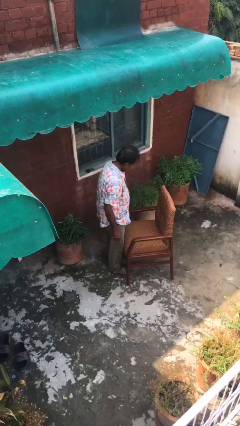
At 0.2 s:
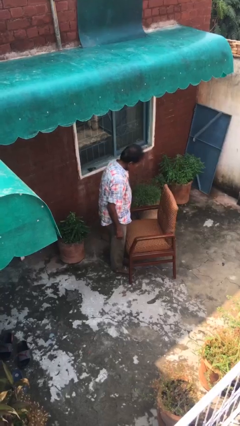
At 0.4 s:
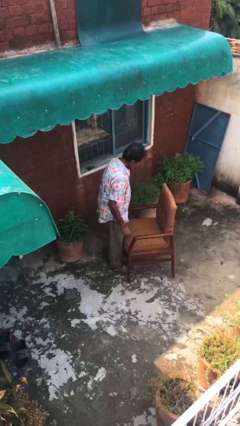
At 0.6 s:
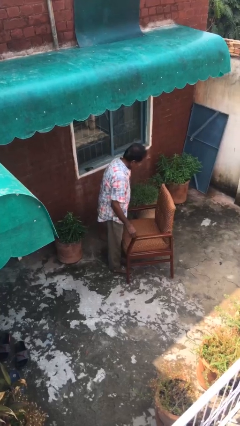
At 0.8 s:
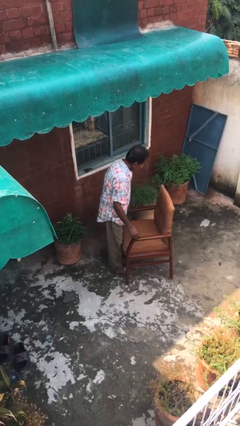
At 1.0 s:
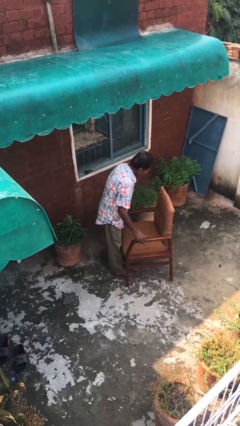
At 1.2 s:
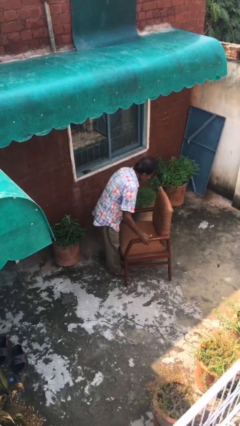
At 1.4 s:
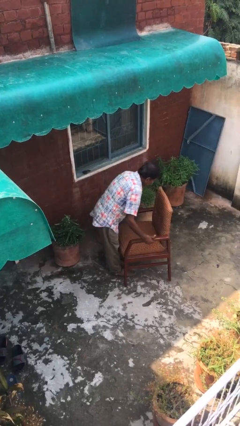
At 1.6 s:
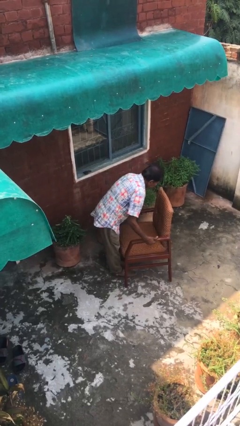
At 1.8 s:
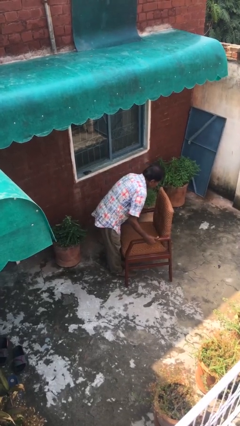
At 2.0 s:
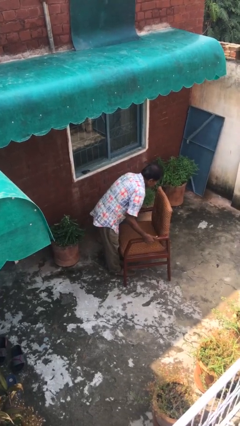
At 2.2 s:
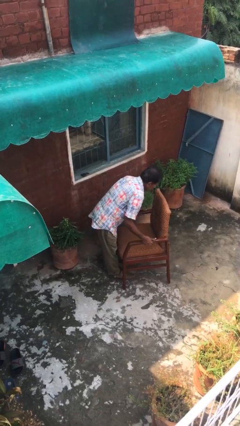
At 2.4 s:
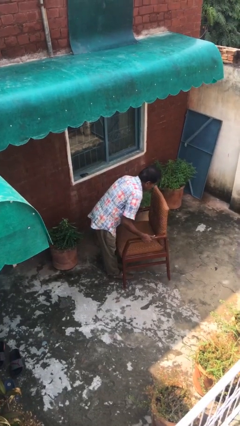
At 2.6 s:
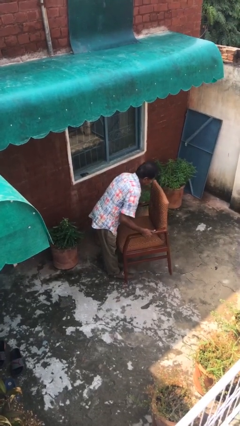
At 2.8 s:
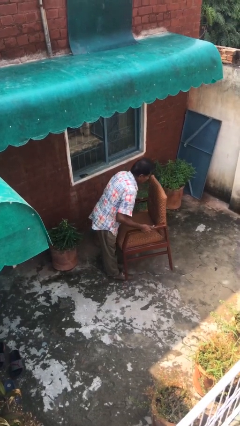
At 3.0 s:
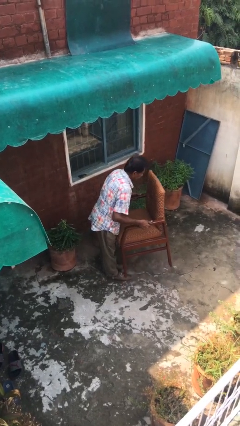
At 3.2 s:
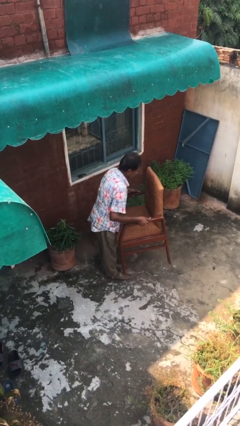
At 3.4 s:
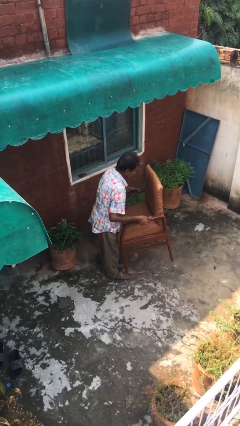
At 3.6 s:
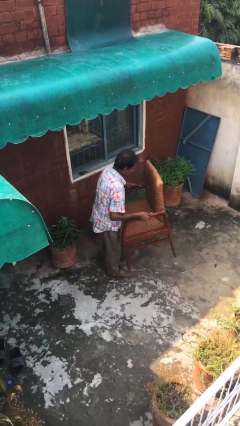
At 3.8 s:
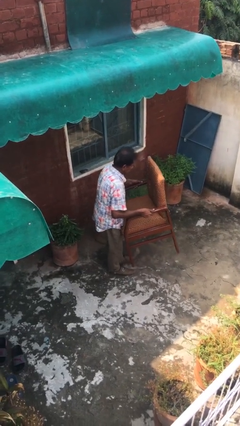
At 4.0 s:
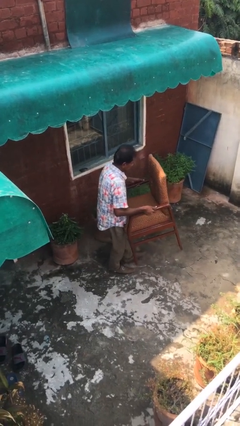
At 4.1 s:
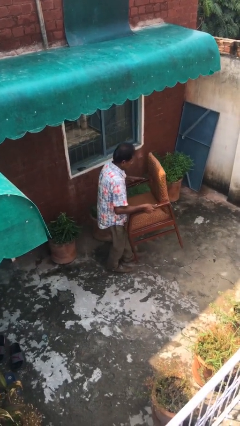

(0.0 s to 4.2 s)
person picks up object from floor

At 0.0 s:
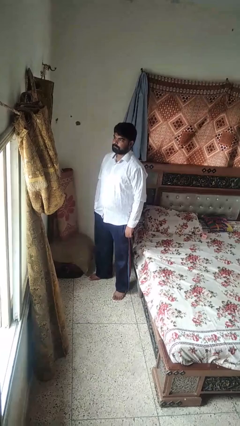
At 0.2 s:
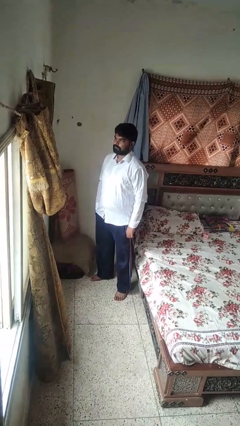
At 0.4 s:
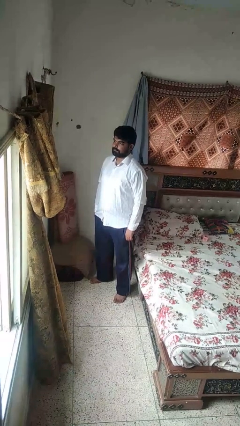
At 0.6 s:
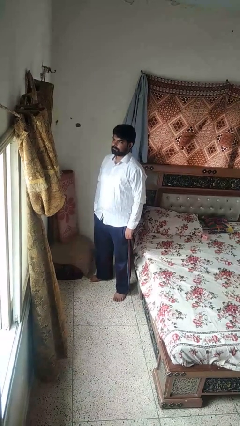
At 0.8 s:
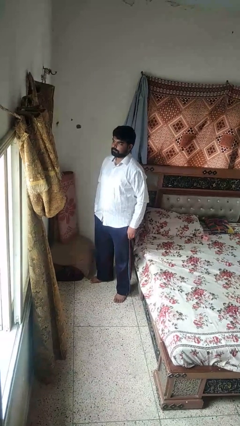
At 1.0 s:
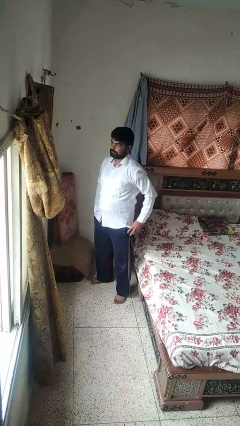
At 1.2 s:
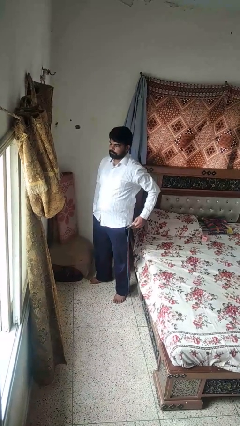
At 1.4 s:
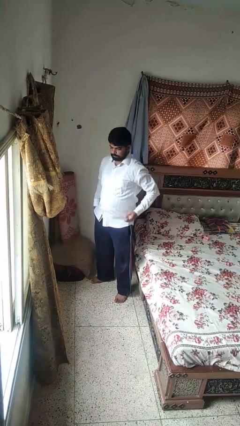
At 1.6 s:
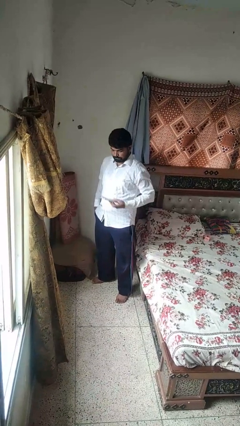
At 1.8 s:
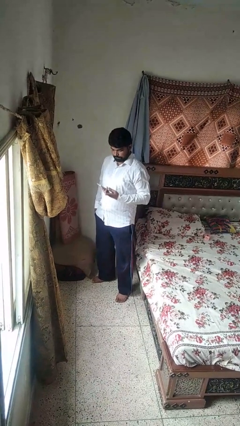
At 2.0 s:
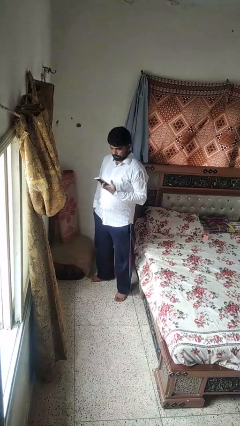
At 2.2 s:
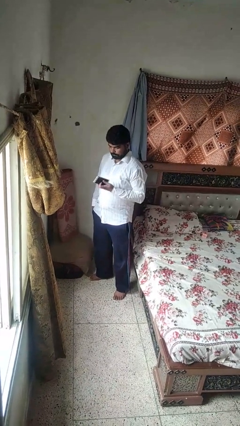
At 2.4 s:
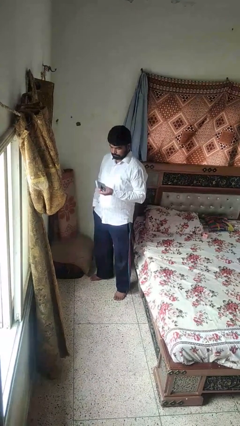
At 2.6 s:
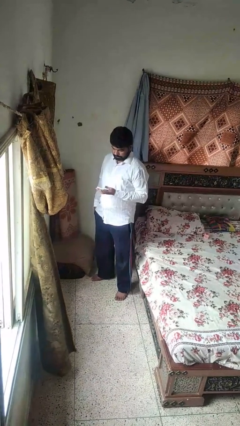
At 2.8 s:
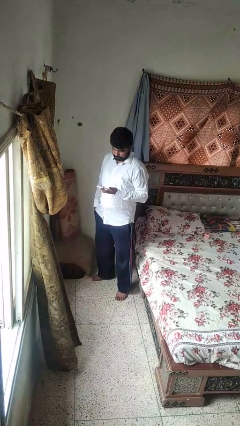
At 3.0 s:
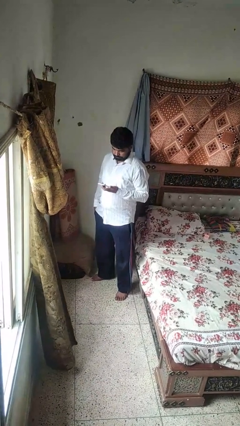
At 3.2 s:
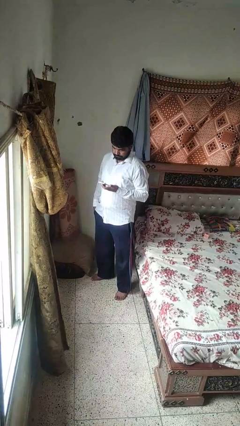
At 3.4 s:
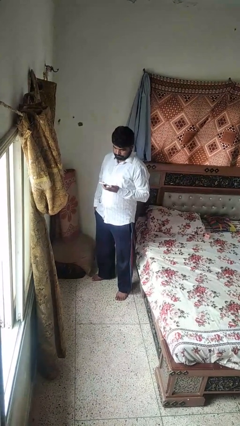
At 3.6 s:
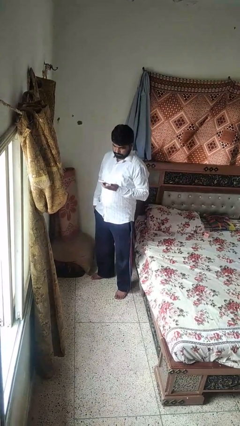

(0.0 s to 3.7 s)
person takes phone from pocket

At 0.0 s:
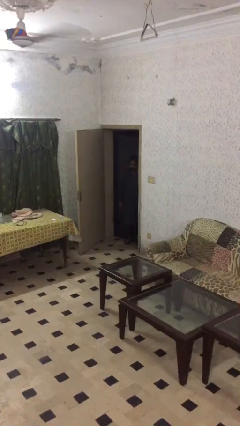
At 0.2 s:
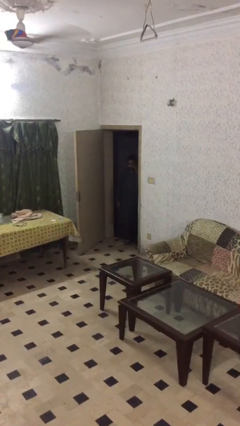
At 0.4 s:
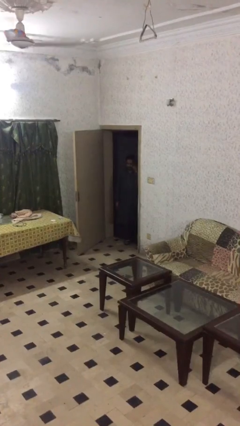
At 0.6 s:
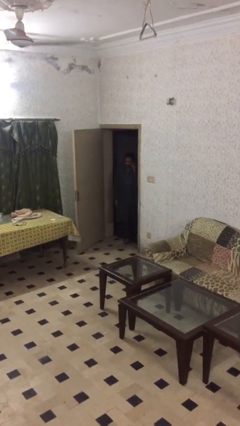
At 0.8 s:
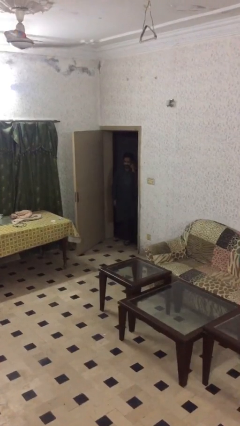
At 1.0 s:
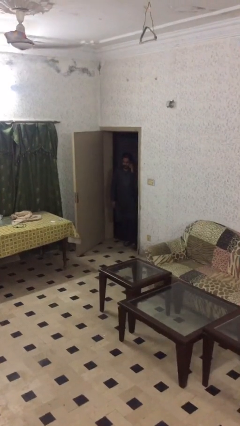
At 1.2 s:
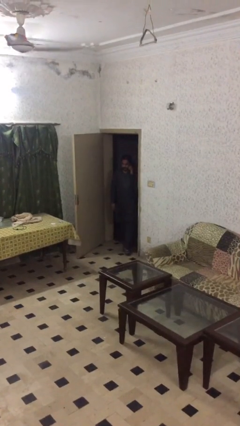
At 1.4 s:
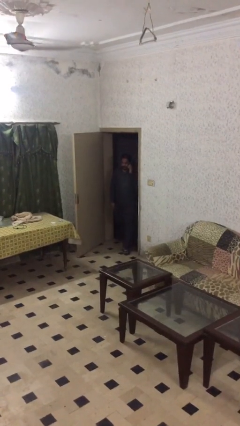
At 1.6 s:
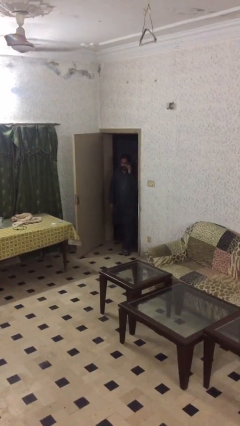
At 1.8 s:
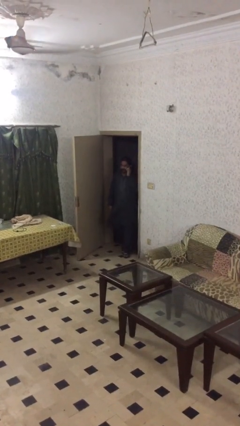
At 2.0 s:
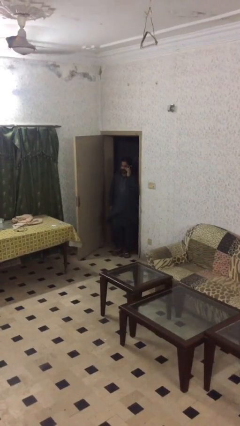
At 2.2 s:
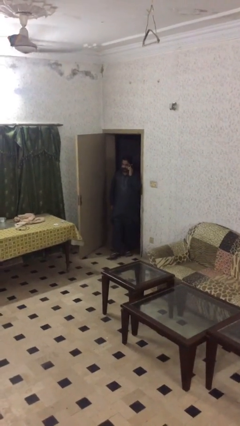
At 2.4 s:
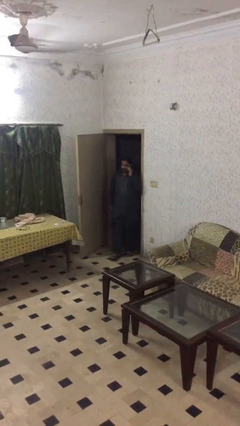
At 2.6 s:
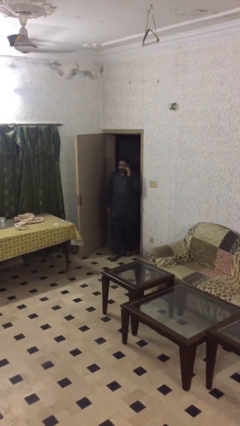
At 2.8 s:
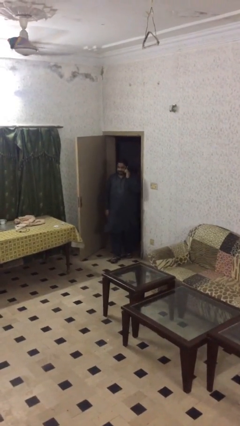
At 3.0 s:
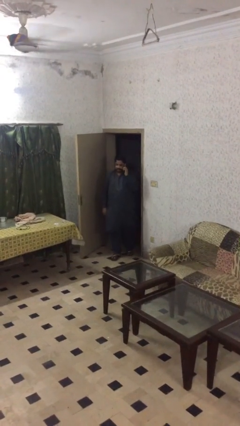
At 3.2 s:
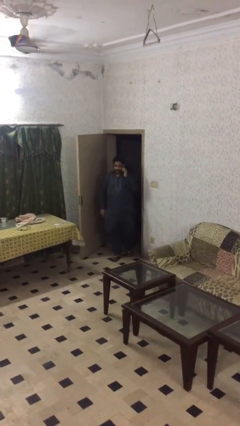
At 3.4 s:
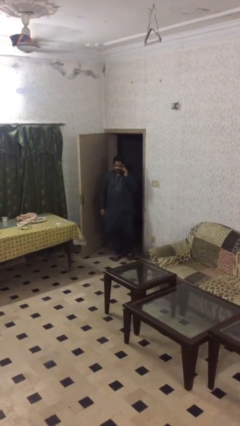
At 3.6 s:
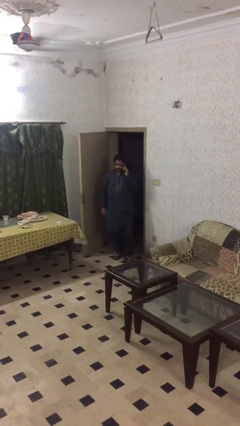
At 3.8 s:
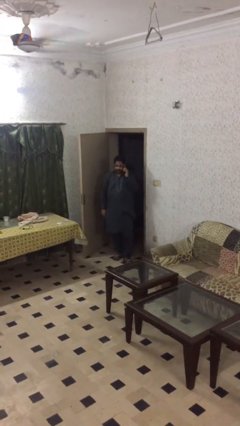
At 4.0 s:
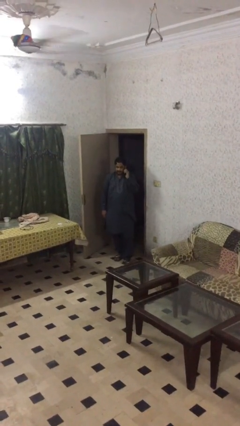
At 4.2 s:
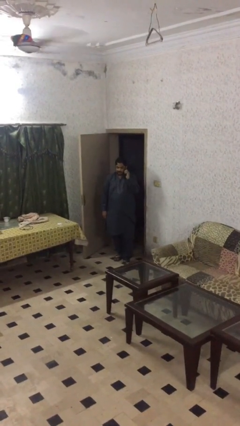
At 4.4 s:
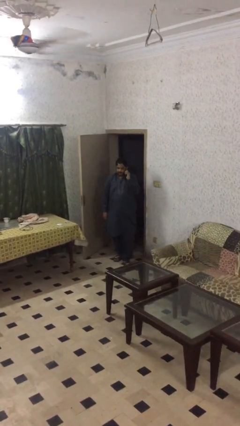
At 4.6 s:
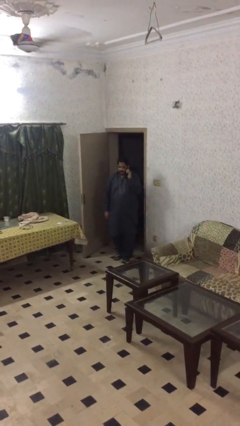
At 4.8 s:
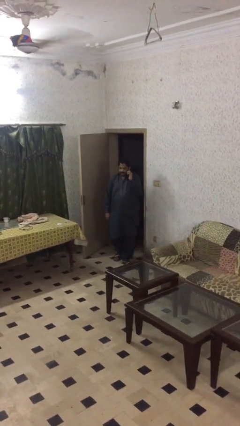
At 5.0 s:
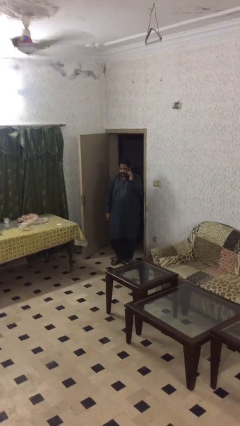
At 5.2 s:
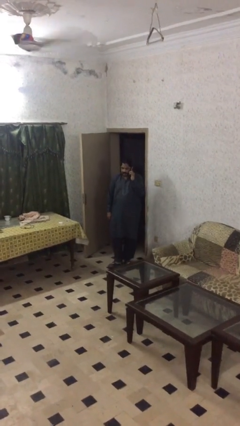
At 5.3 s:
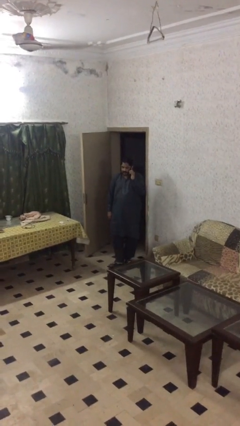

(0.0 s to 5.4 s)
person enters scene through structure

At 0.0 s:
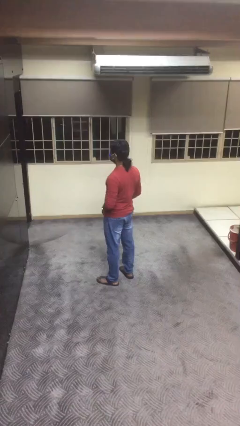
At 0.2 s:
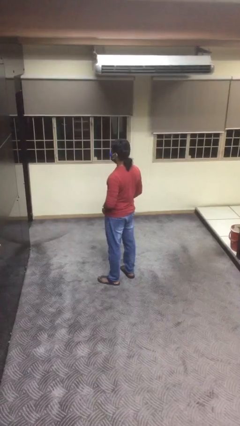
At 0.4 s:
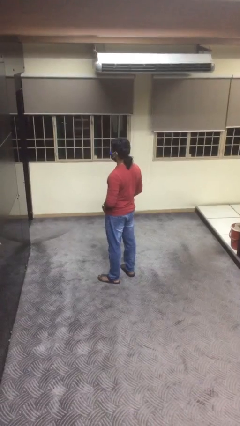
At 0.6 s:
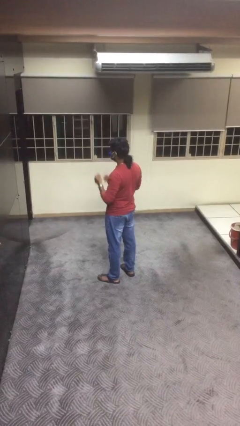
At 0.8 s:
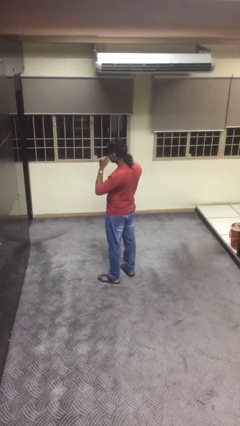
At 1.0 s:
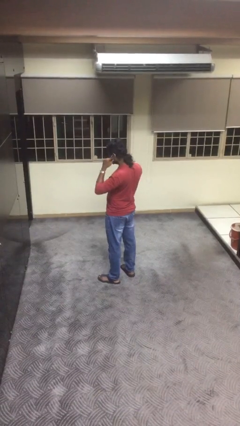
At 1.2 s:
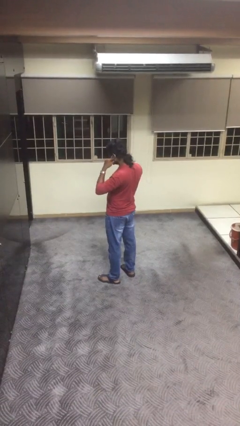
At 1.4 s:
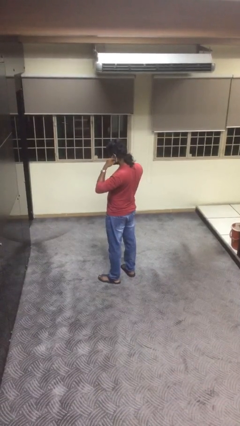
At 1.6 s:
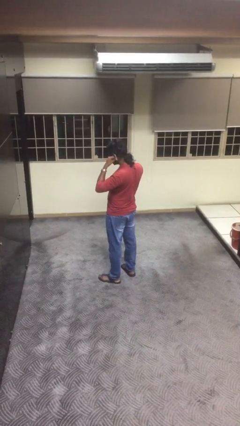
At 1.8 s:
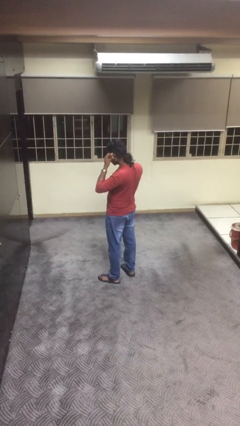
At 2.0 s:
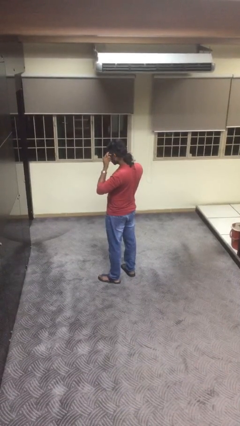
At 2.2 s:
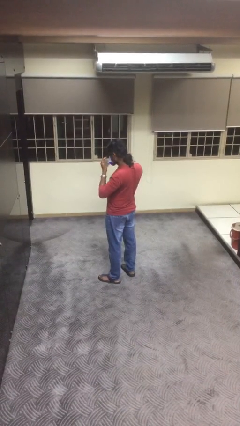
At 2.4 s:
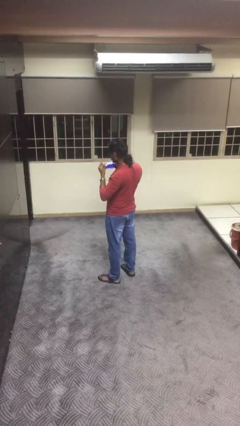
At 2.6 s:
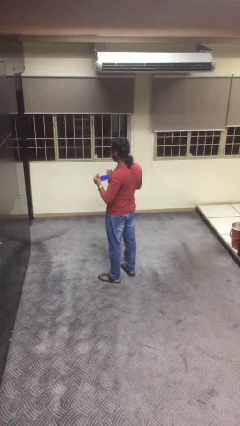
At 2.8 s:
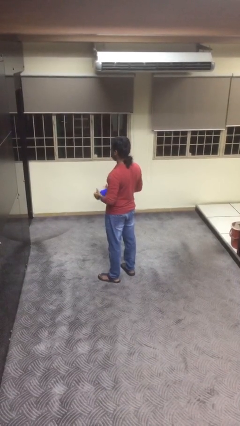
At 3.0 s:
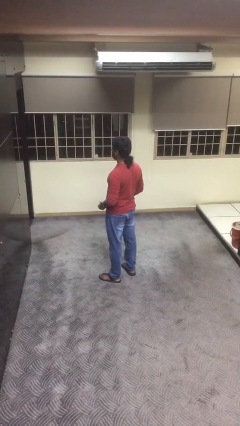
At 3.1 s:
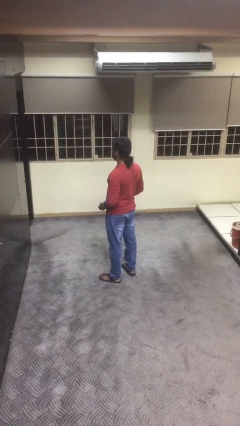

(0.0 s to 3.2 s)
person takes off facemask

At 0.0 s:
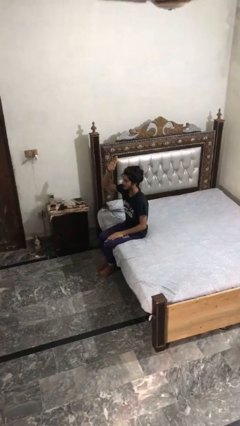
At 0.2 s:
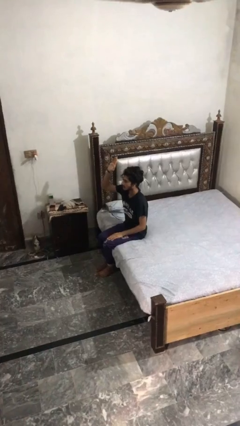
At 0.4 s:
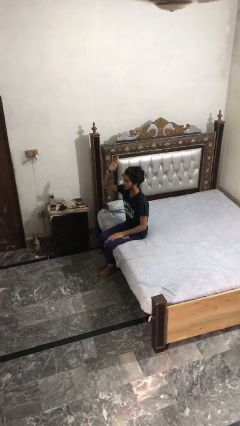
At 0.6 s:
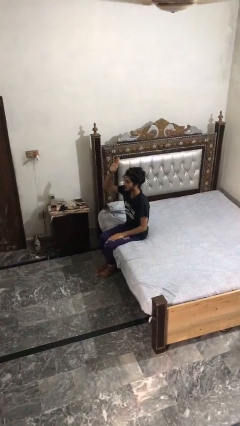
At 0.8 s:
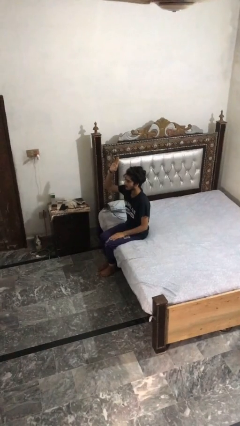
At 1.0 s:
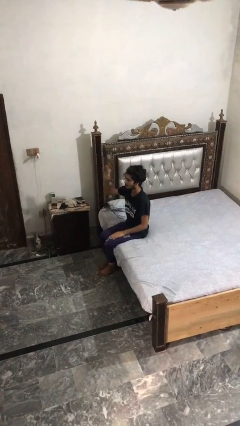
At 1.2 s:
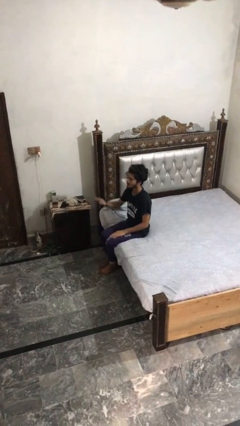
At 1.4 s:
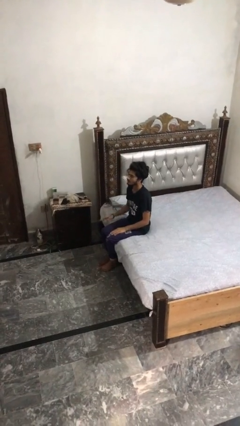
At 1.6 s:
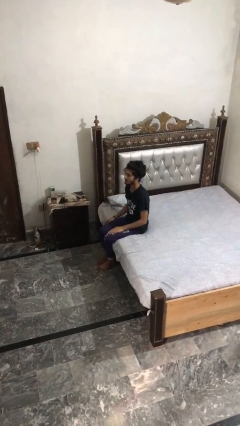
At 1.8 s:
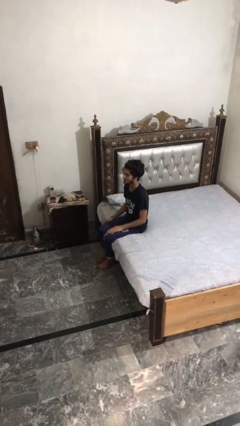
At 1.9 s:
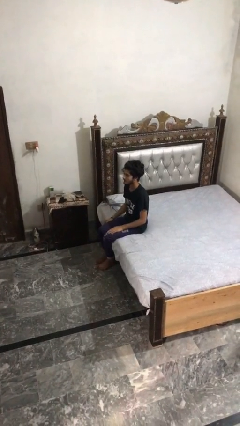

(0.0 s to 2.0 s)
person gestures lower hand
